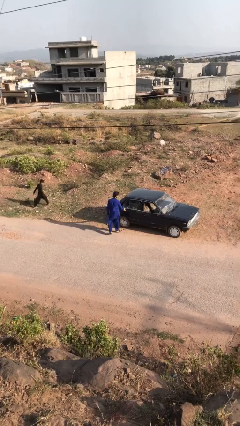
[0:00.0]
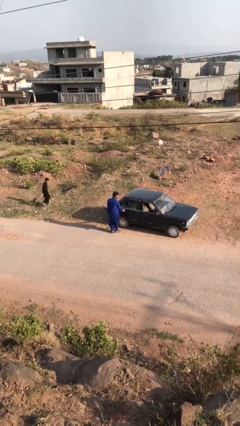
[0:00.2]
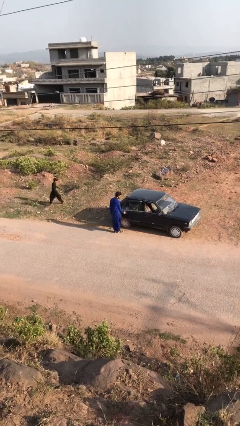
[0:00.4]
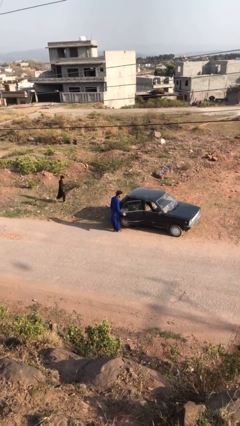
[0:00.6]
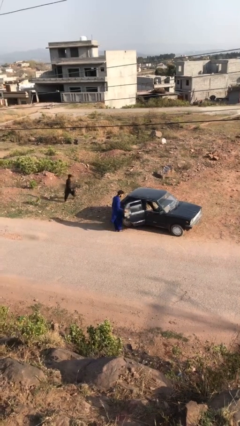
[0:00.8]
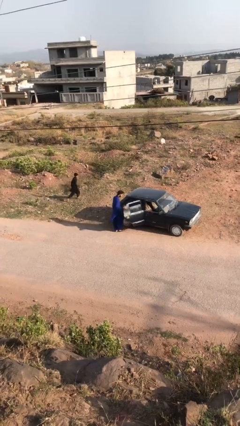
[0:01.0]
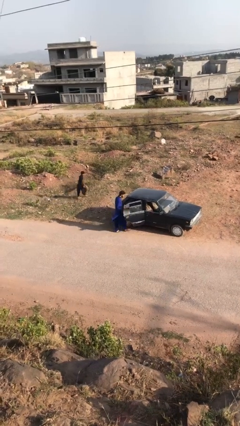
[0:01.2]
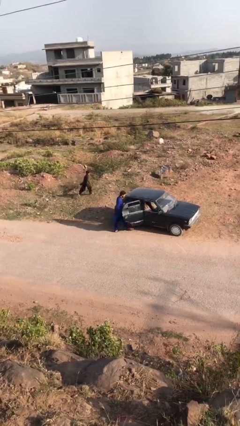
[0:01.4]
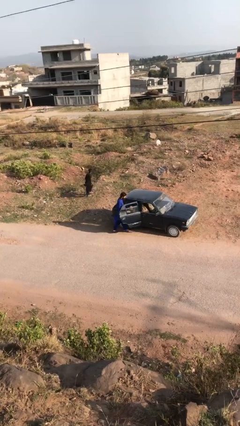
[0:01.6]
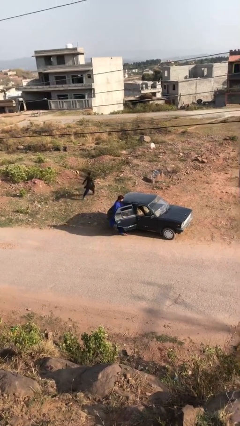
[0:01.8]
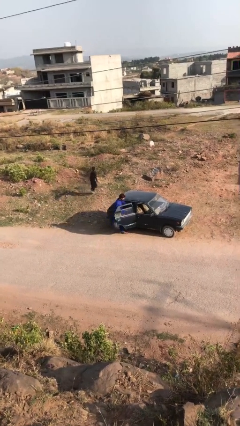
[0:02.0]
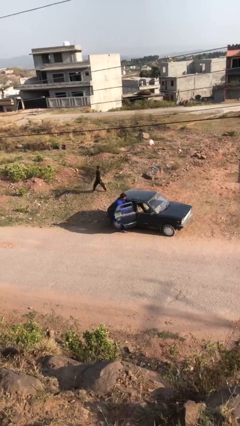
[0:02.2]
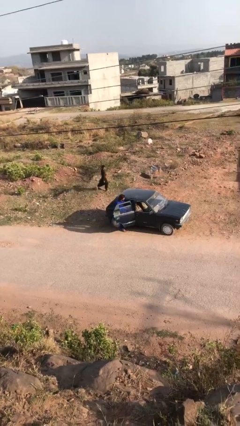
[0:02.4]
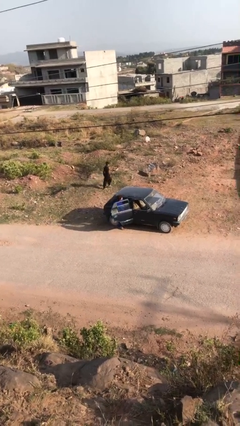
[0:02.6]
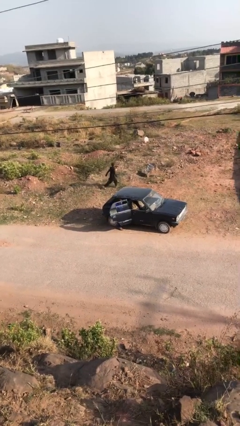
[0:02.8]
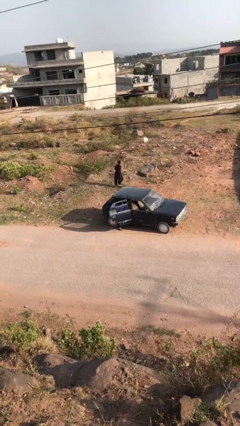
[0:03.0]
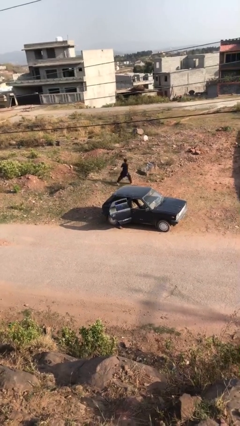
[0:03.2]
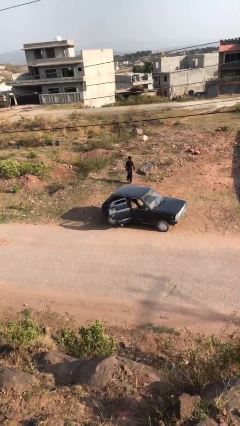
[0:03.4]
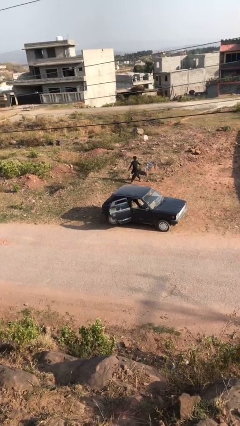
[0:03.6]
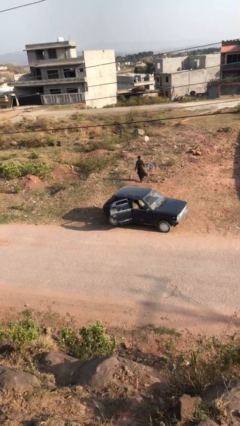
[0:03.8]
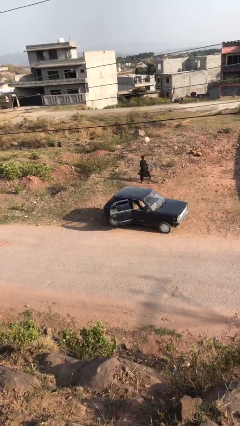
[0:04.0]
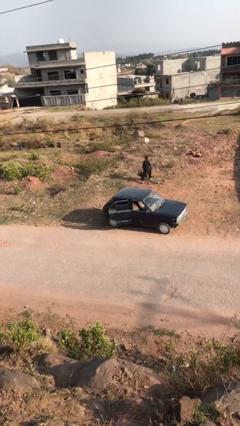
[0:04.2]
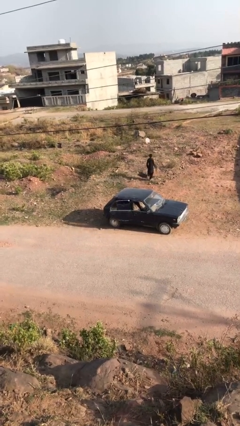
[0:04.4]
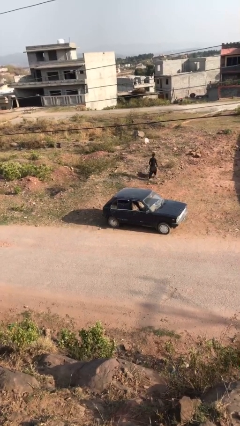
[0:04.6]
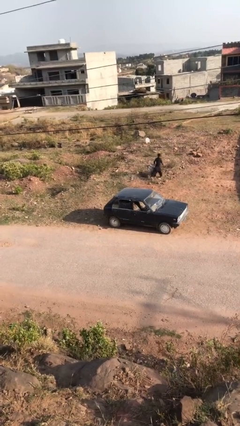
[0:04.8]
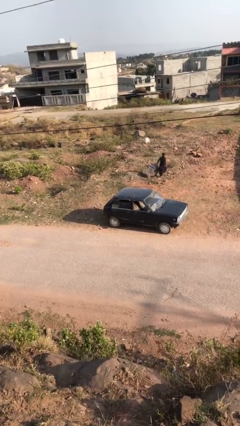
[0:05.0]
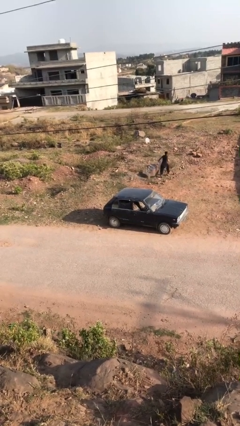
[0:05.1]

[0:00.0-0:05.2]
car picks up person

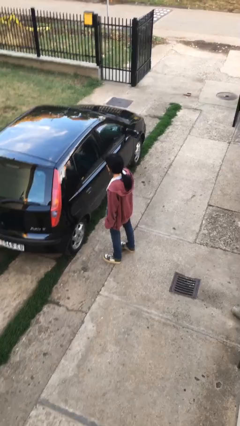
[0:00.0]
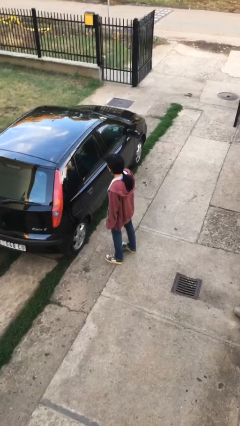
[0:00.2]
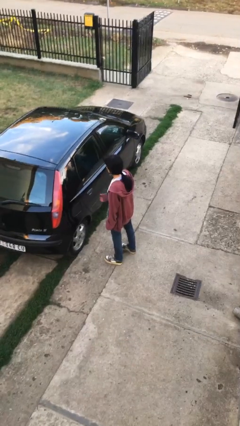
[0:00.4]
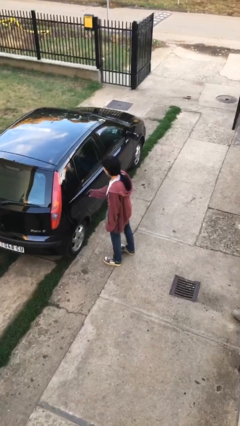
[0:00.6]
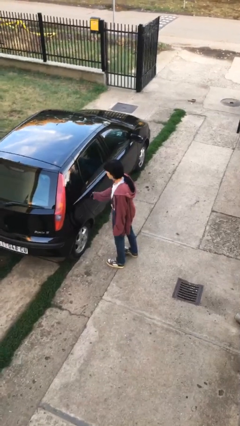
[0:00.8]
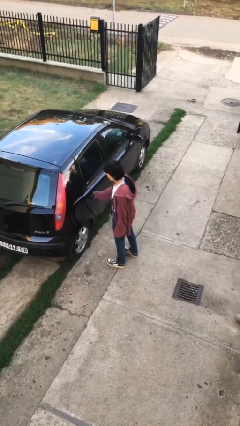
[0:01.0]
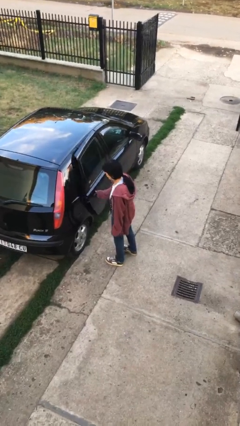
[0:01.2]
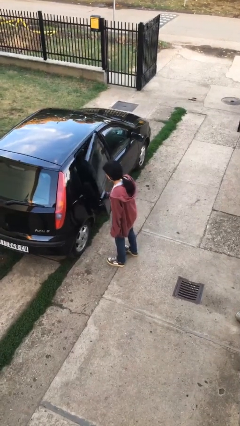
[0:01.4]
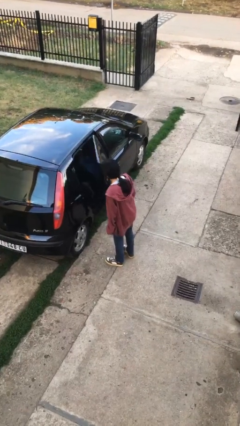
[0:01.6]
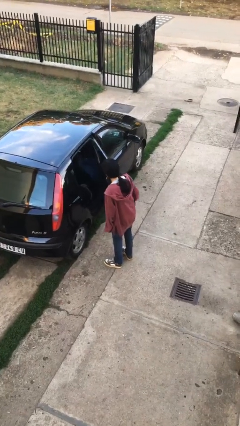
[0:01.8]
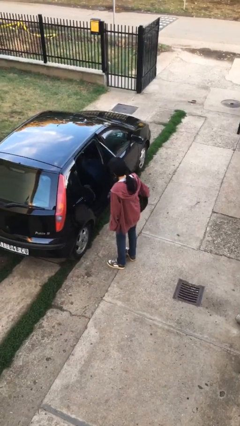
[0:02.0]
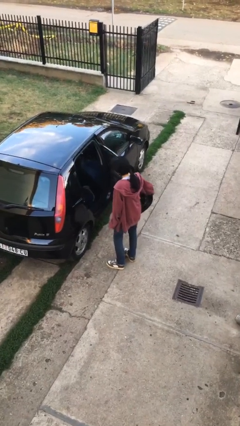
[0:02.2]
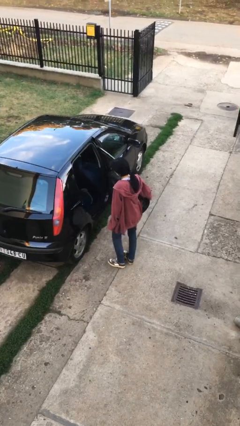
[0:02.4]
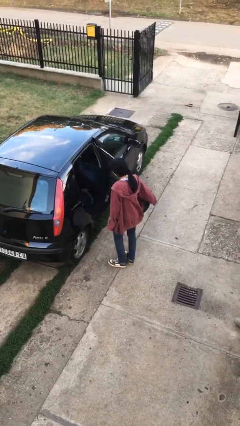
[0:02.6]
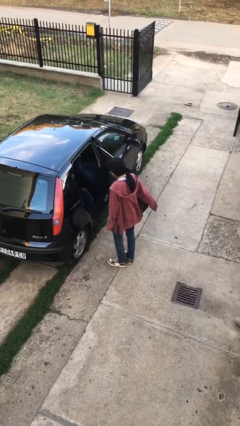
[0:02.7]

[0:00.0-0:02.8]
person opens car door

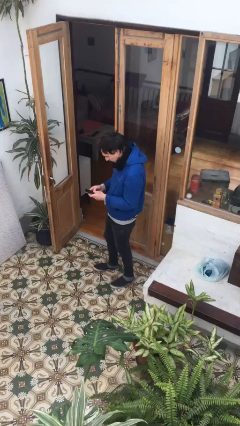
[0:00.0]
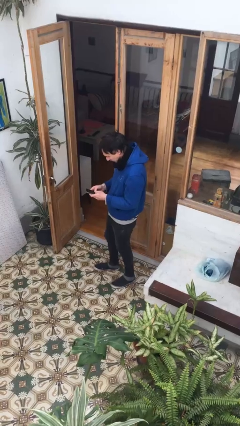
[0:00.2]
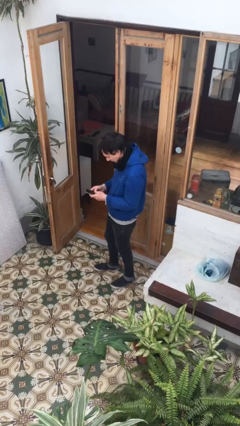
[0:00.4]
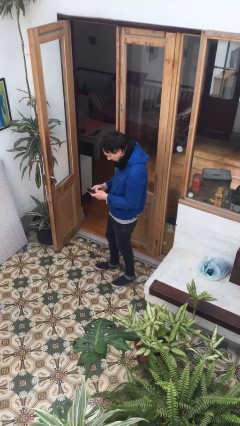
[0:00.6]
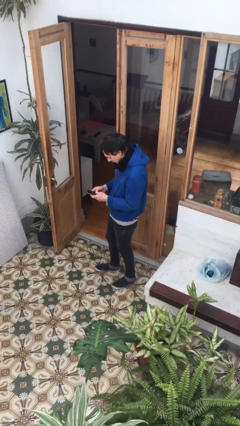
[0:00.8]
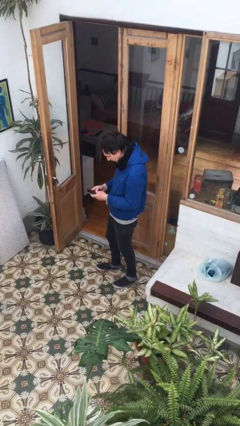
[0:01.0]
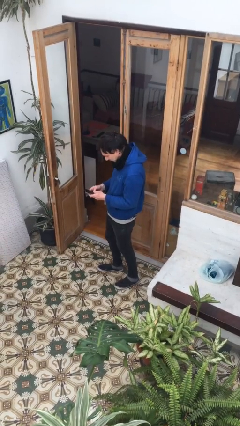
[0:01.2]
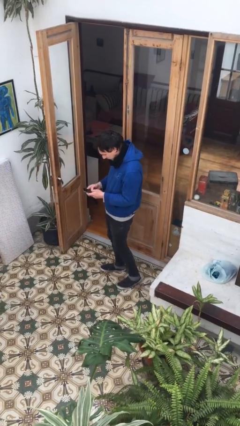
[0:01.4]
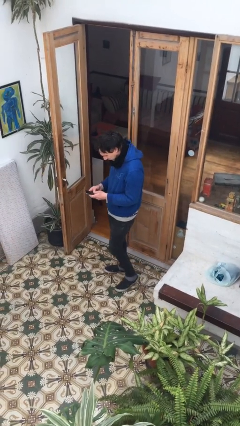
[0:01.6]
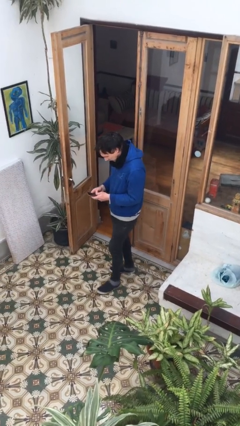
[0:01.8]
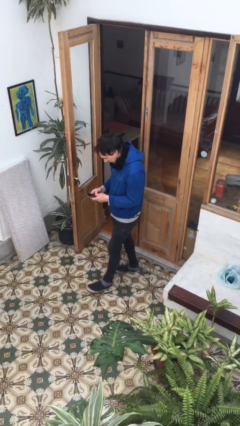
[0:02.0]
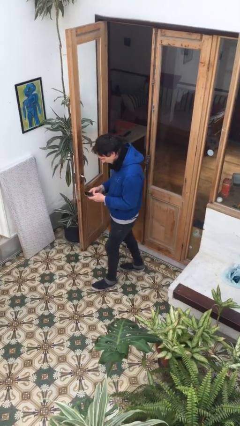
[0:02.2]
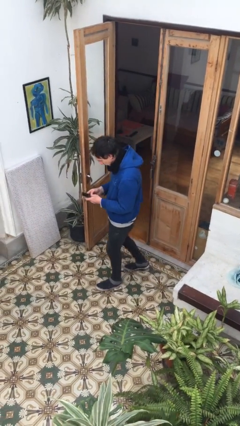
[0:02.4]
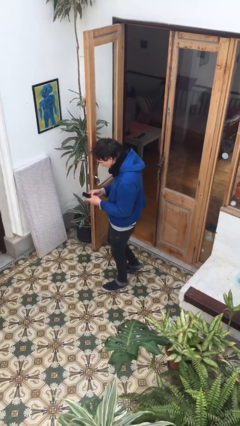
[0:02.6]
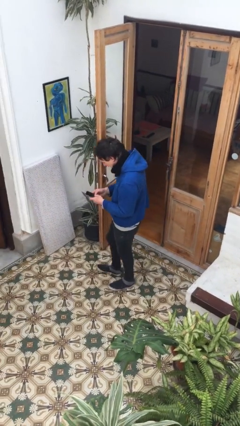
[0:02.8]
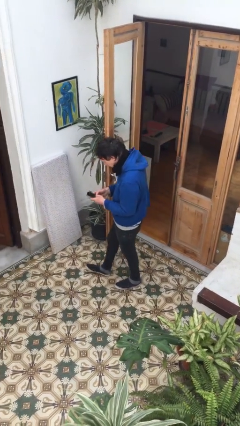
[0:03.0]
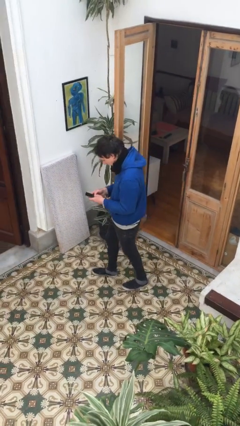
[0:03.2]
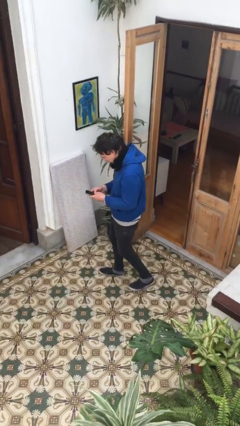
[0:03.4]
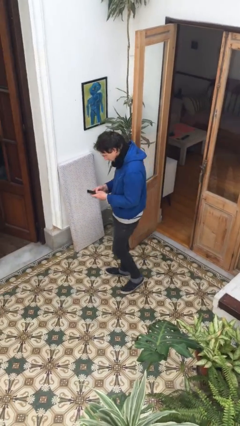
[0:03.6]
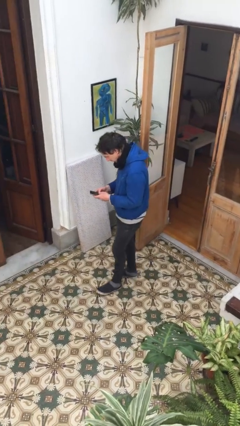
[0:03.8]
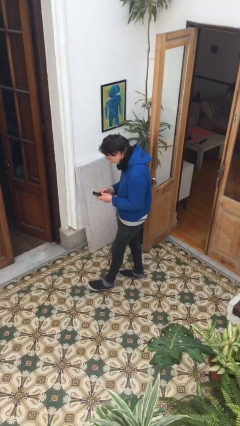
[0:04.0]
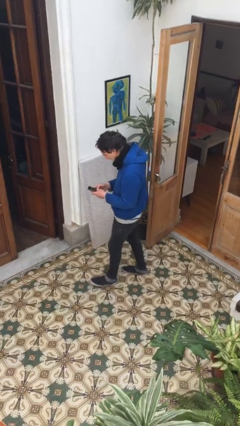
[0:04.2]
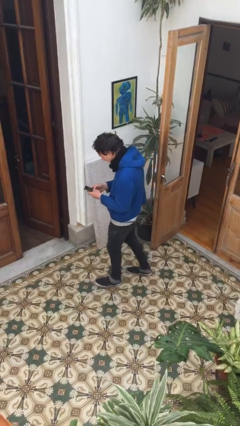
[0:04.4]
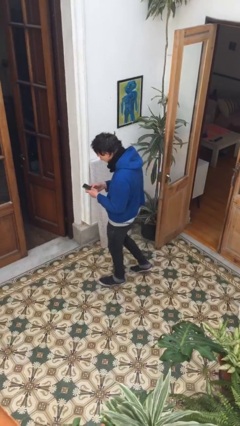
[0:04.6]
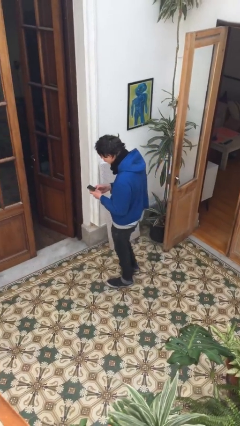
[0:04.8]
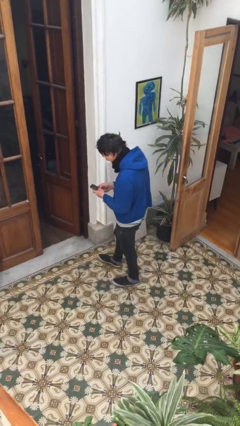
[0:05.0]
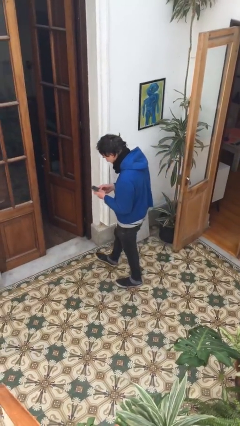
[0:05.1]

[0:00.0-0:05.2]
person texts on phone

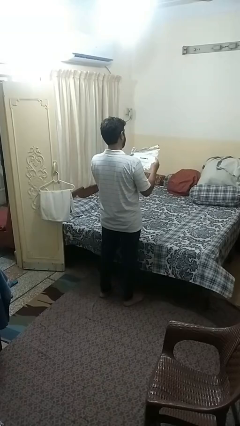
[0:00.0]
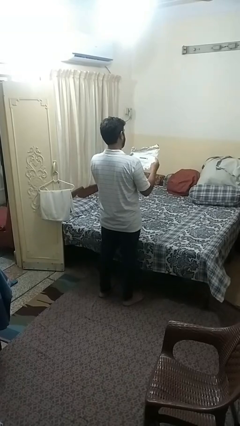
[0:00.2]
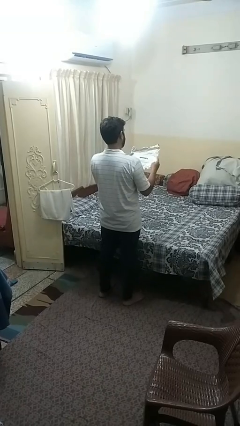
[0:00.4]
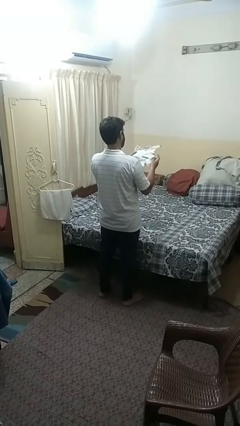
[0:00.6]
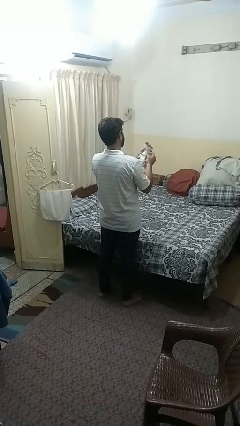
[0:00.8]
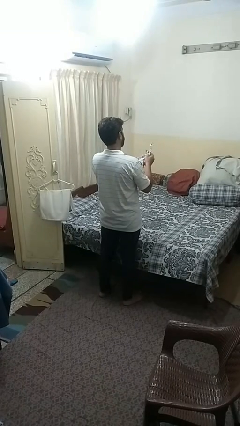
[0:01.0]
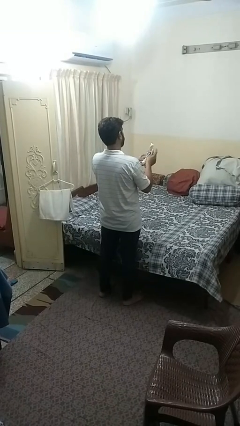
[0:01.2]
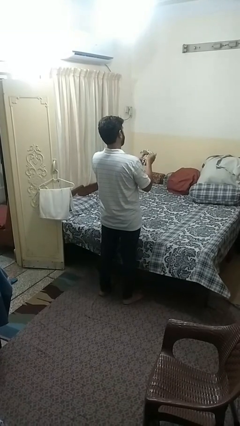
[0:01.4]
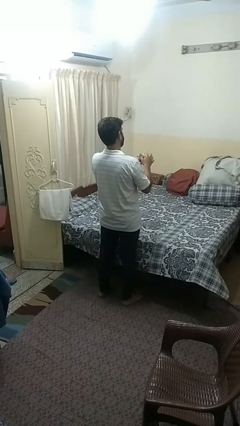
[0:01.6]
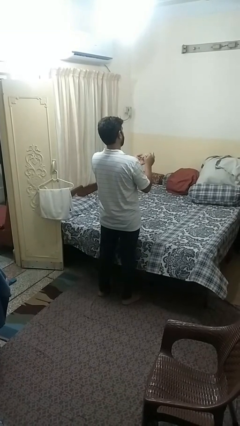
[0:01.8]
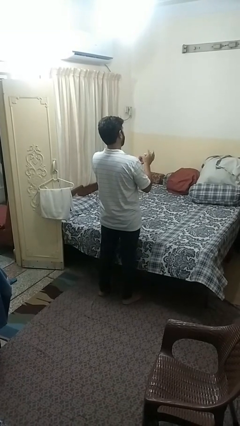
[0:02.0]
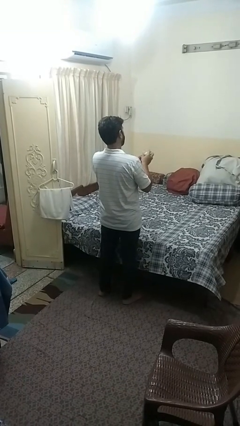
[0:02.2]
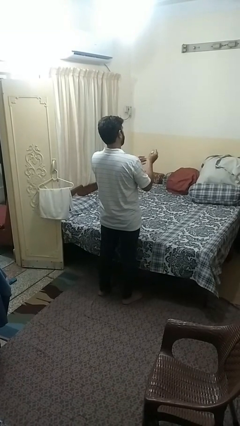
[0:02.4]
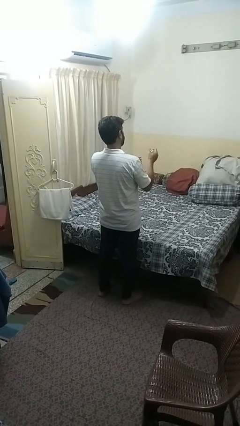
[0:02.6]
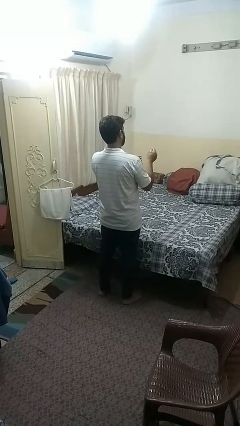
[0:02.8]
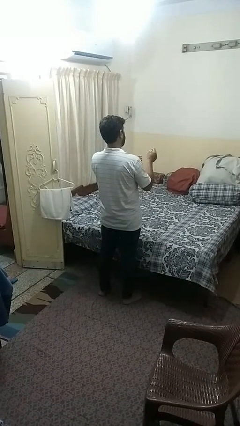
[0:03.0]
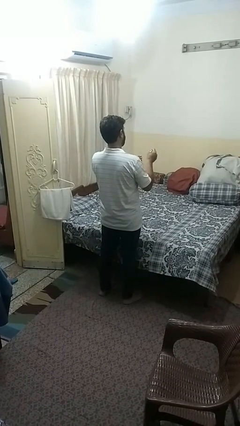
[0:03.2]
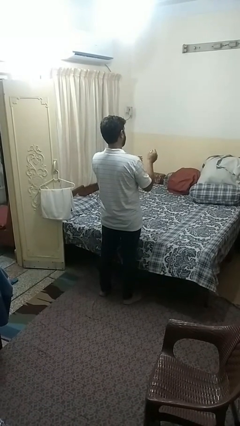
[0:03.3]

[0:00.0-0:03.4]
person crumples paper

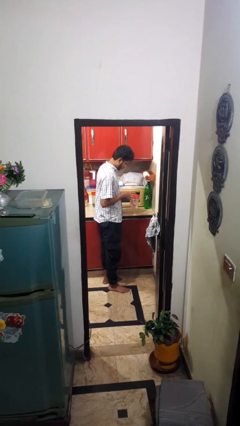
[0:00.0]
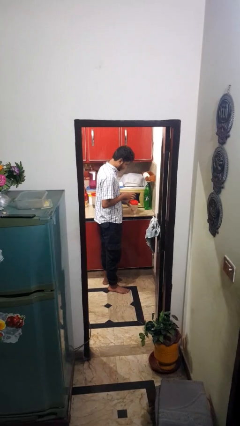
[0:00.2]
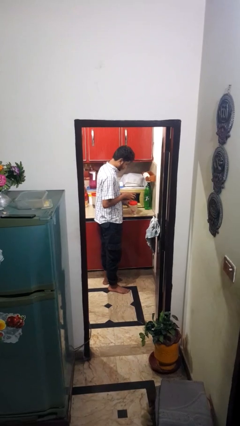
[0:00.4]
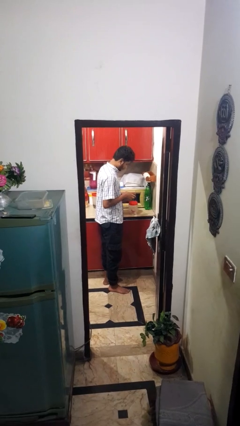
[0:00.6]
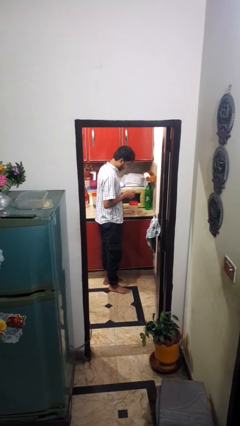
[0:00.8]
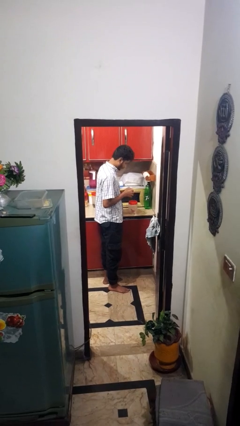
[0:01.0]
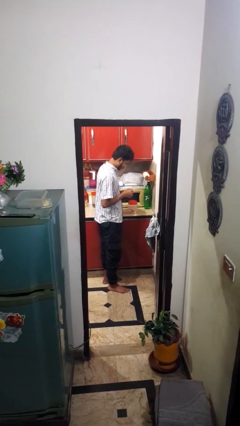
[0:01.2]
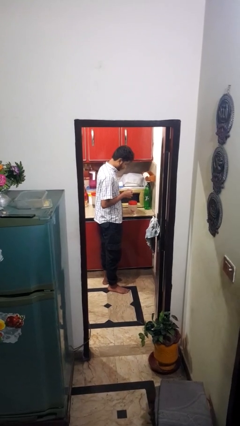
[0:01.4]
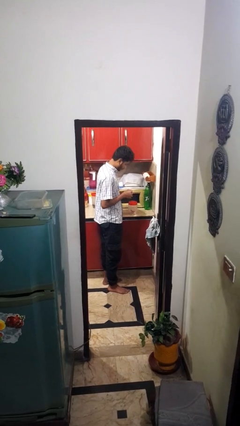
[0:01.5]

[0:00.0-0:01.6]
person puts down object on countertop
